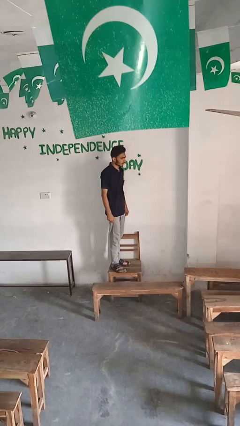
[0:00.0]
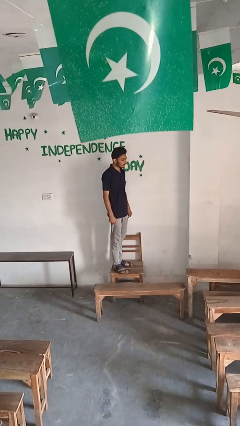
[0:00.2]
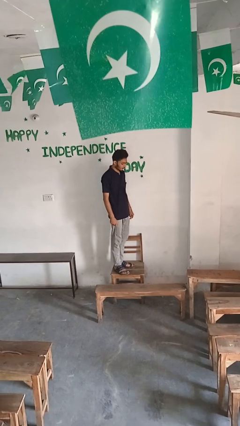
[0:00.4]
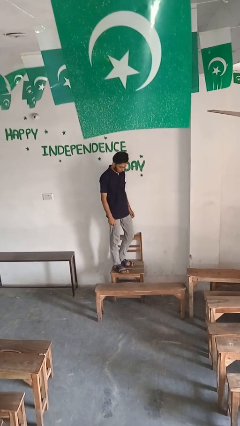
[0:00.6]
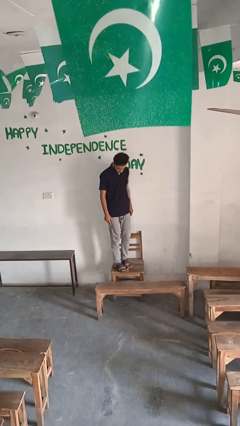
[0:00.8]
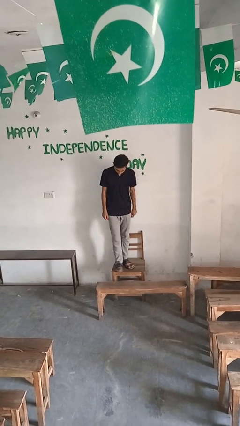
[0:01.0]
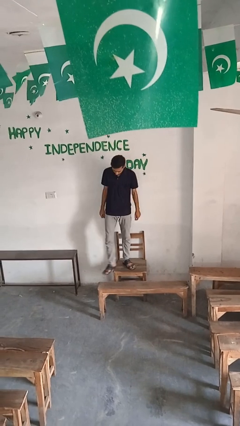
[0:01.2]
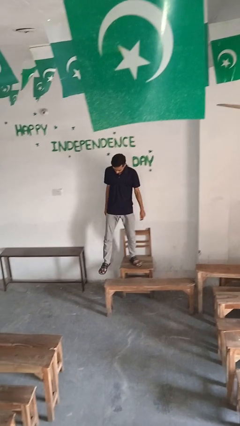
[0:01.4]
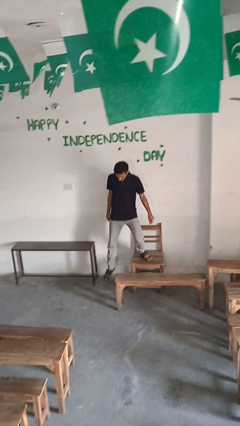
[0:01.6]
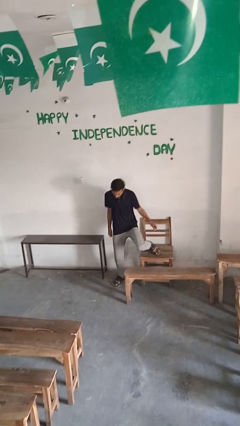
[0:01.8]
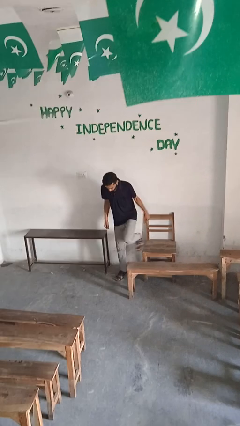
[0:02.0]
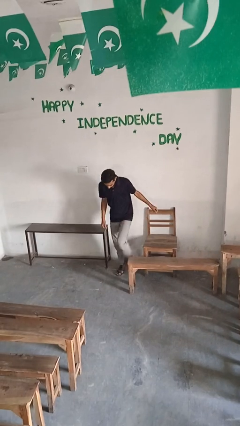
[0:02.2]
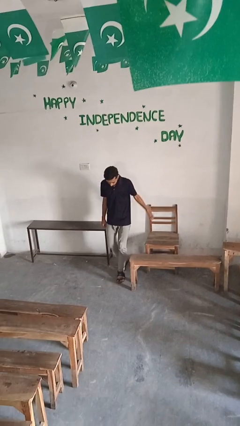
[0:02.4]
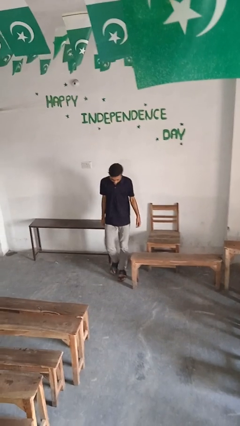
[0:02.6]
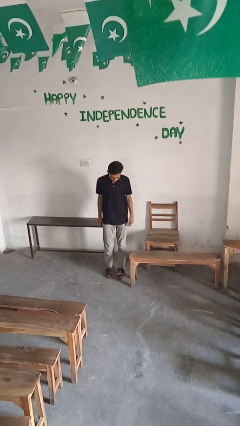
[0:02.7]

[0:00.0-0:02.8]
person climbs off chair

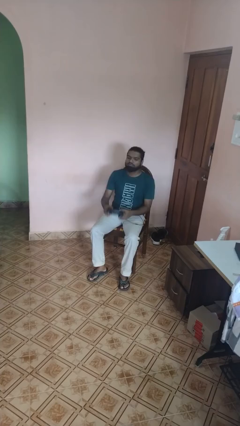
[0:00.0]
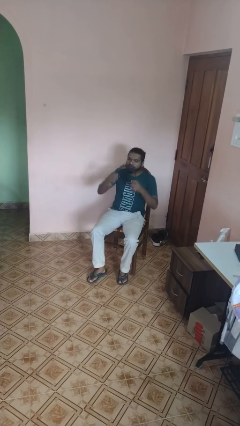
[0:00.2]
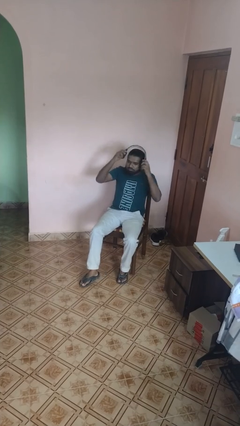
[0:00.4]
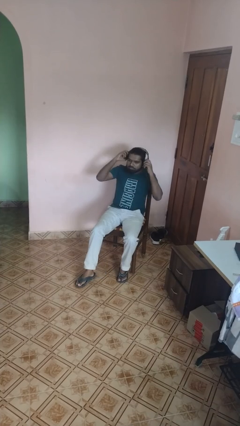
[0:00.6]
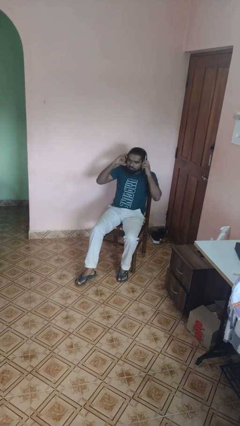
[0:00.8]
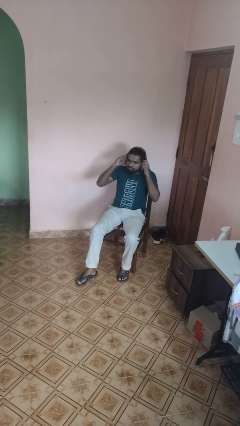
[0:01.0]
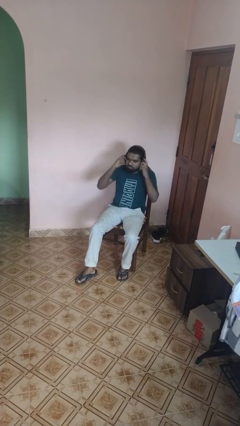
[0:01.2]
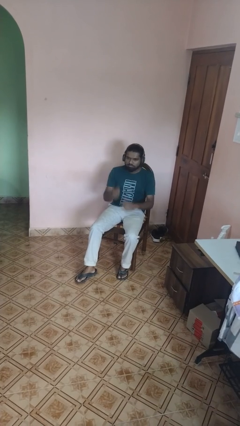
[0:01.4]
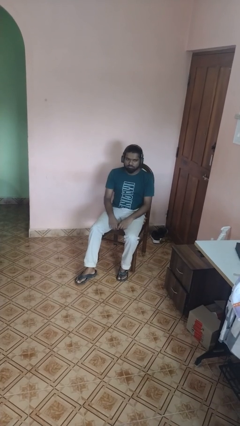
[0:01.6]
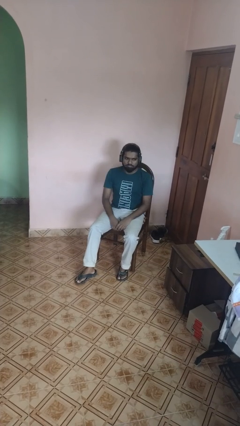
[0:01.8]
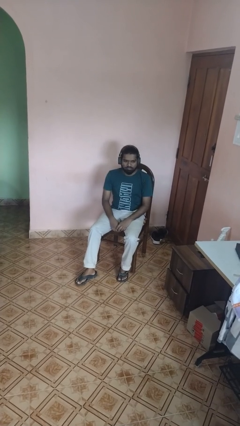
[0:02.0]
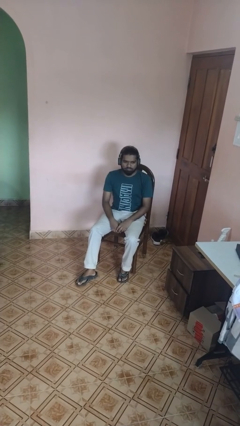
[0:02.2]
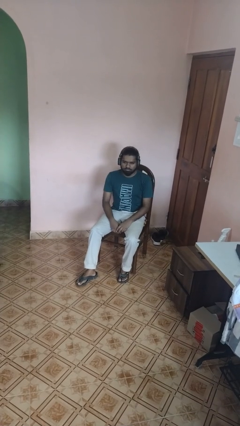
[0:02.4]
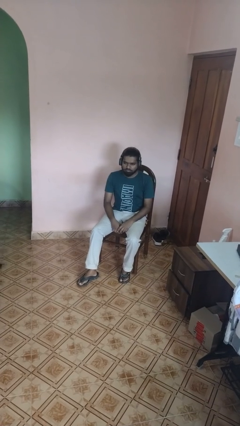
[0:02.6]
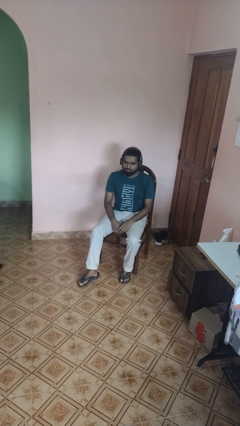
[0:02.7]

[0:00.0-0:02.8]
person puts on headphones

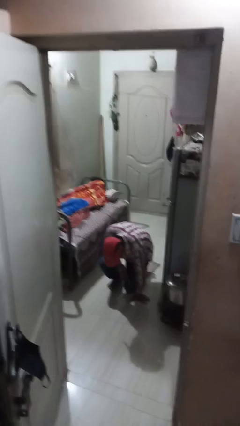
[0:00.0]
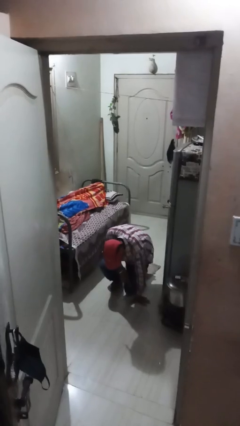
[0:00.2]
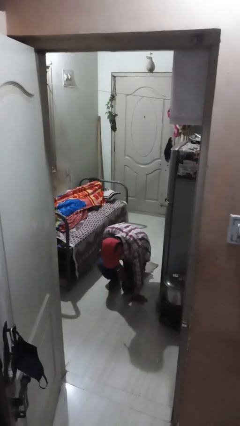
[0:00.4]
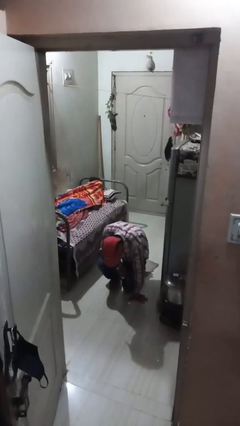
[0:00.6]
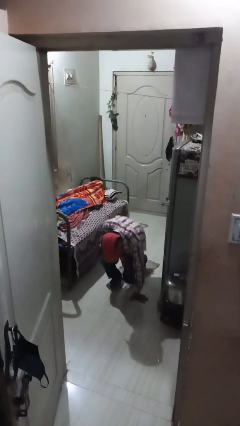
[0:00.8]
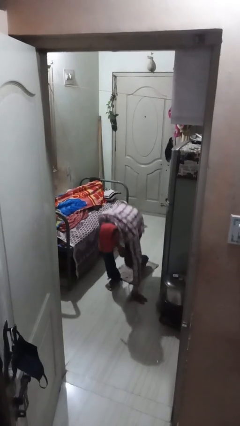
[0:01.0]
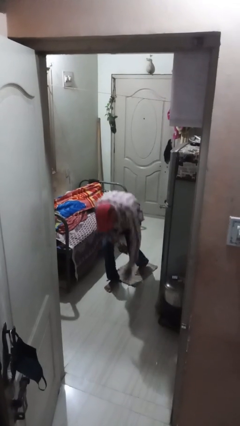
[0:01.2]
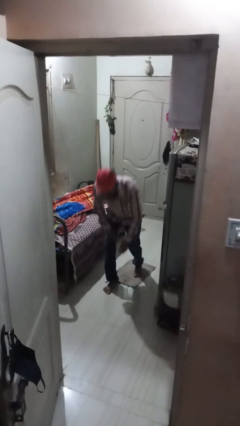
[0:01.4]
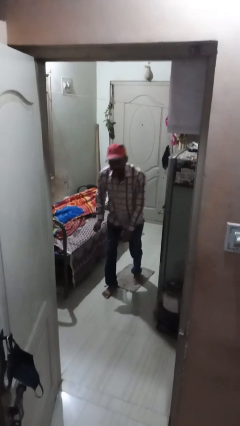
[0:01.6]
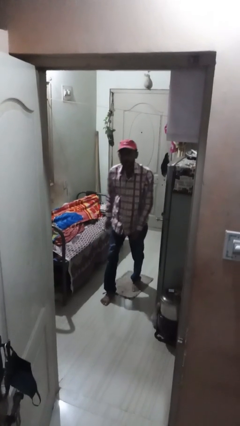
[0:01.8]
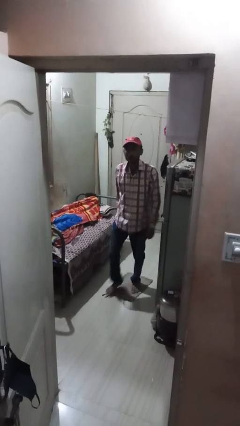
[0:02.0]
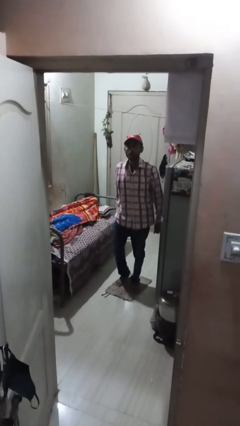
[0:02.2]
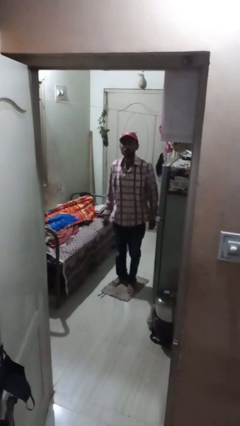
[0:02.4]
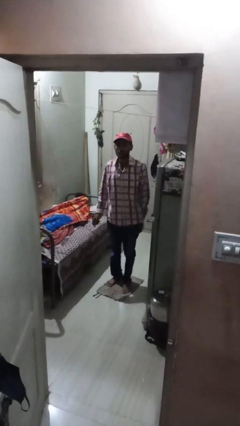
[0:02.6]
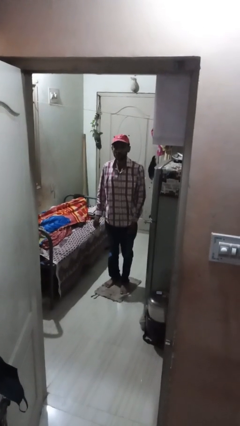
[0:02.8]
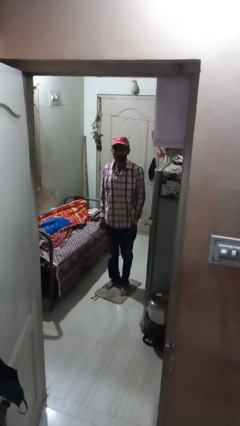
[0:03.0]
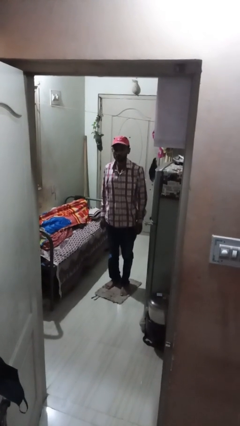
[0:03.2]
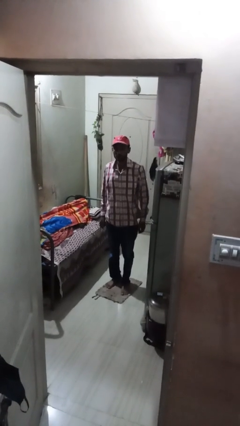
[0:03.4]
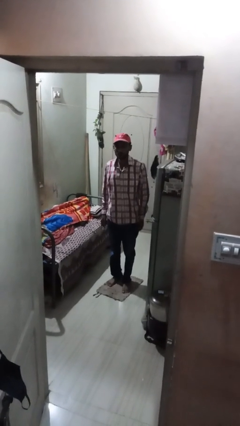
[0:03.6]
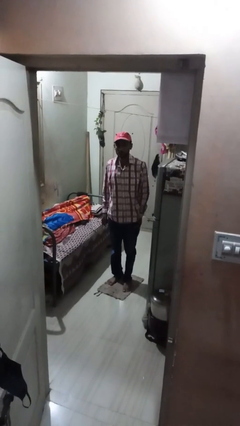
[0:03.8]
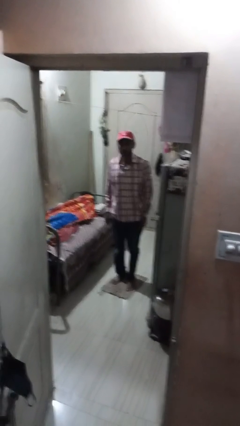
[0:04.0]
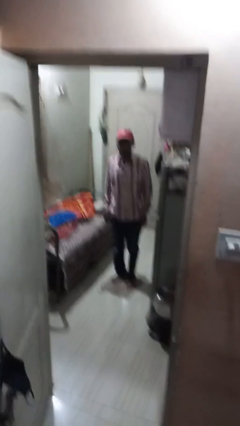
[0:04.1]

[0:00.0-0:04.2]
person stands up from floor

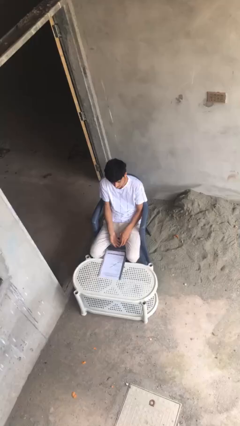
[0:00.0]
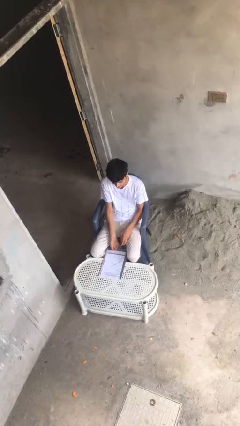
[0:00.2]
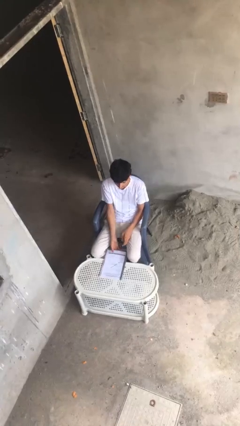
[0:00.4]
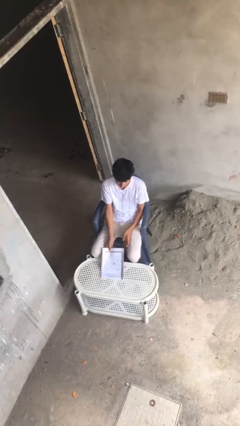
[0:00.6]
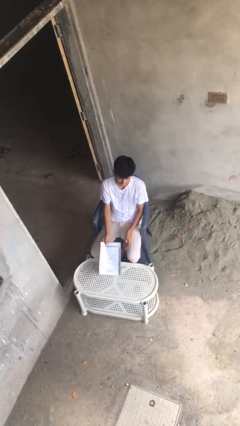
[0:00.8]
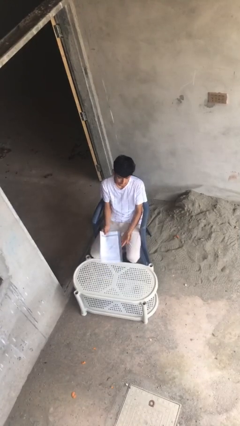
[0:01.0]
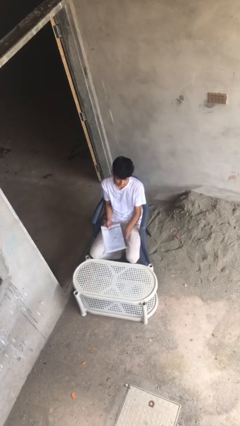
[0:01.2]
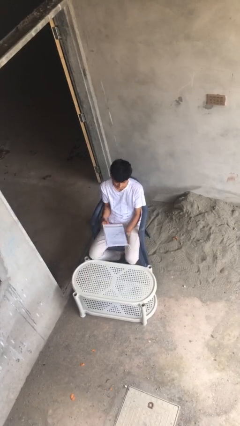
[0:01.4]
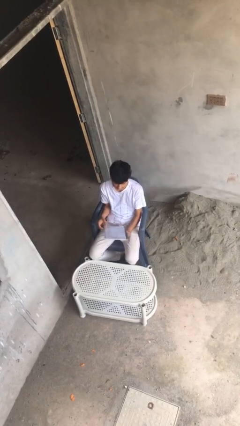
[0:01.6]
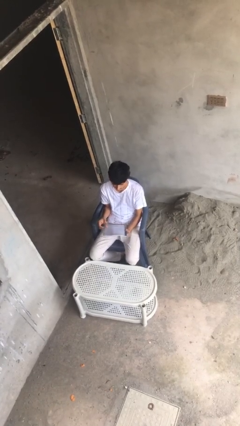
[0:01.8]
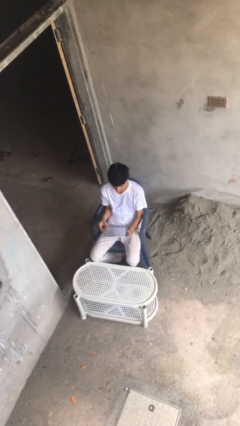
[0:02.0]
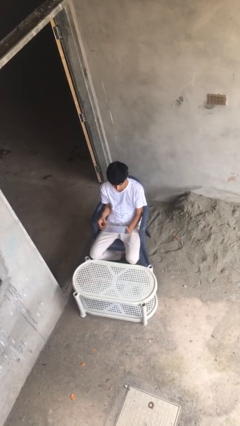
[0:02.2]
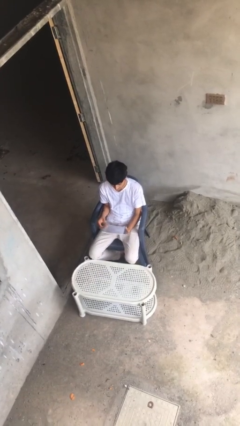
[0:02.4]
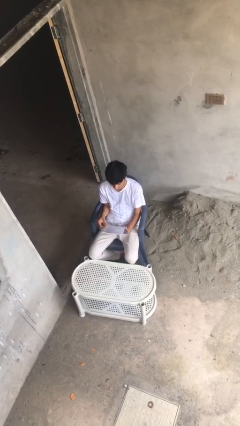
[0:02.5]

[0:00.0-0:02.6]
person picks up object from table

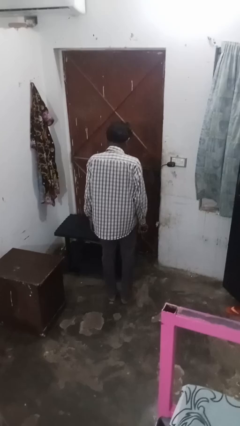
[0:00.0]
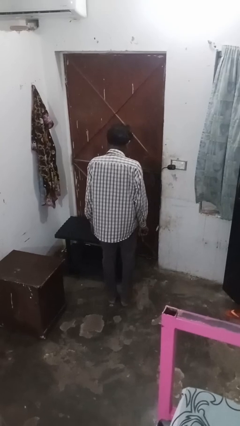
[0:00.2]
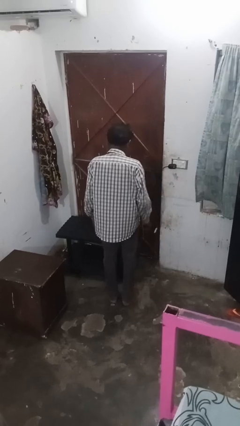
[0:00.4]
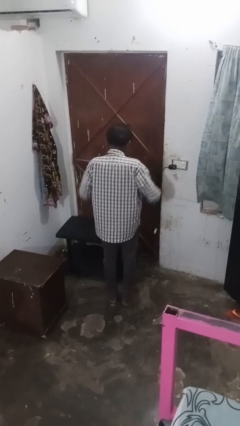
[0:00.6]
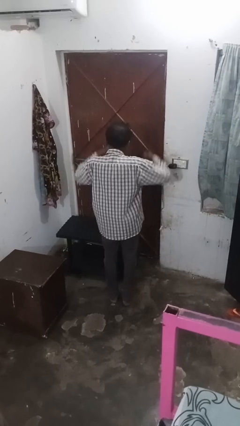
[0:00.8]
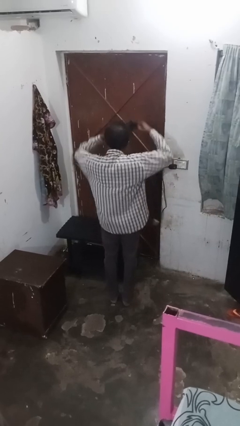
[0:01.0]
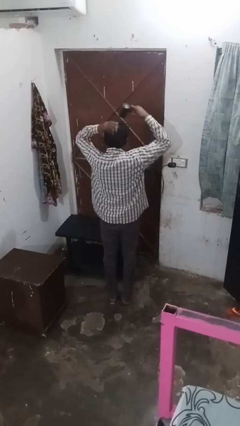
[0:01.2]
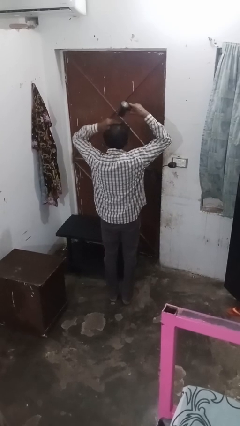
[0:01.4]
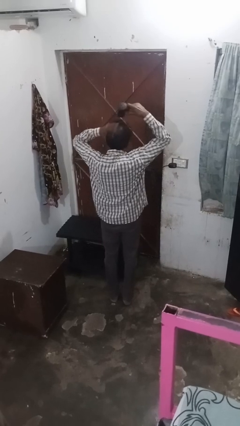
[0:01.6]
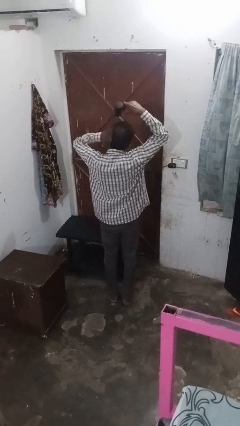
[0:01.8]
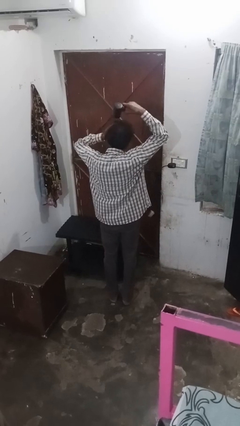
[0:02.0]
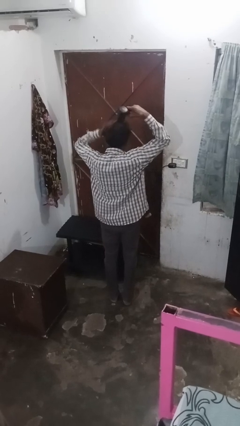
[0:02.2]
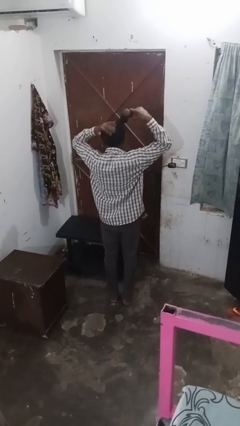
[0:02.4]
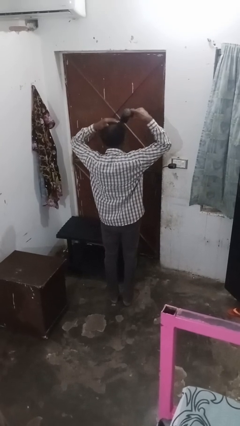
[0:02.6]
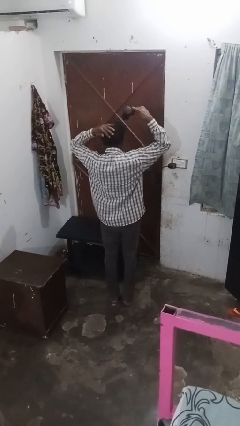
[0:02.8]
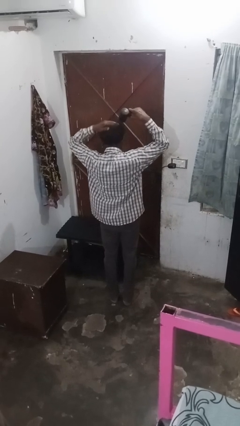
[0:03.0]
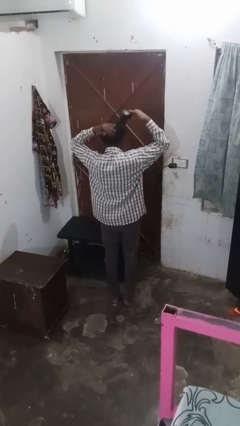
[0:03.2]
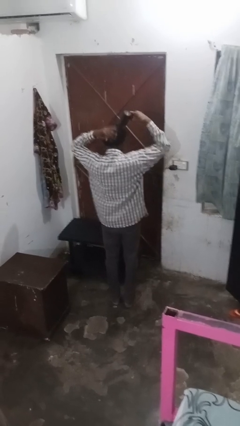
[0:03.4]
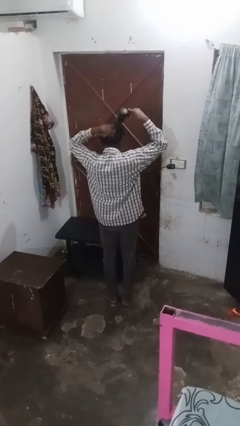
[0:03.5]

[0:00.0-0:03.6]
person dries hair with hairdryer

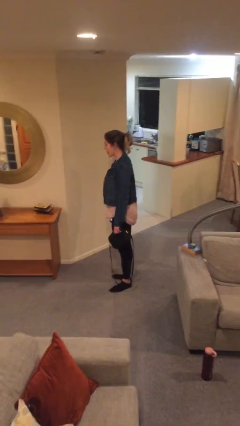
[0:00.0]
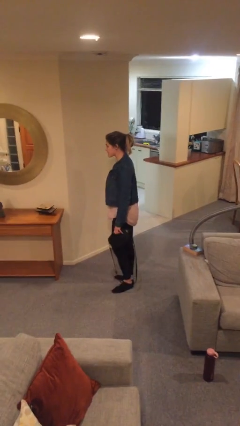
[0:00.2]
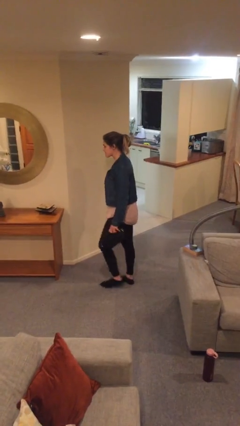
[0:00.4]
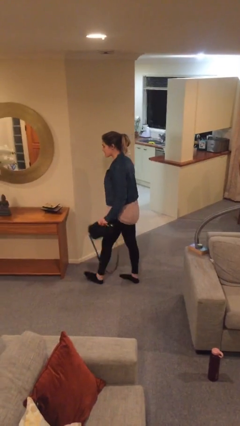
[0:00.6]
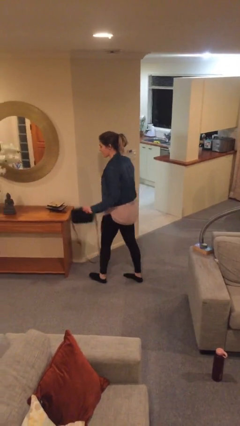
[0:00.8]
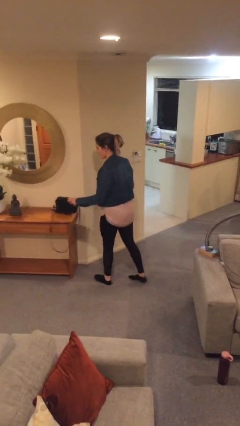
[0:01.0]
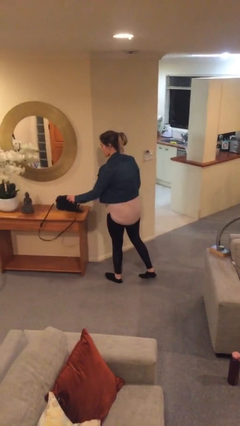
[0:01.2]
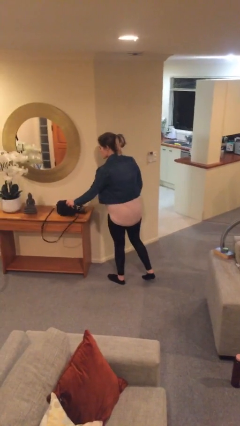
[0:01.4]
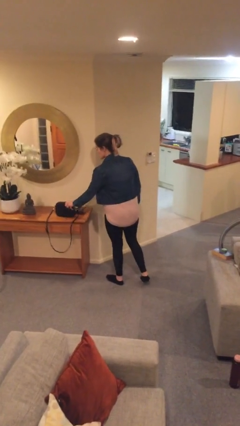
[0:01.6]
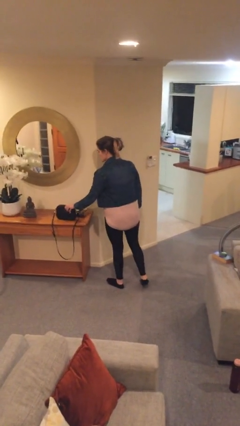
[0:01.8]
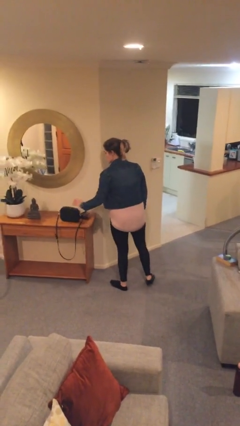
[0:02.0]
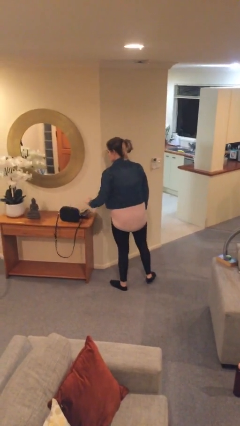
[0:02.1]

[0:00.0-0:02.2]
person puts down object on table
